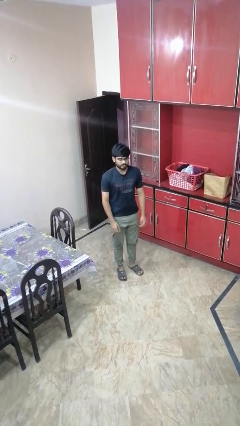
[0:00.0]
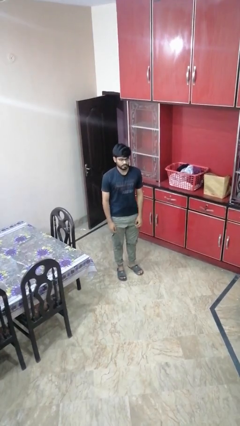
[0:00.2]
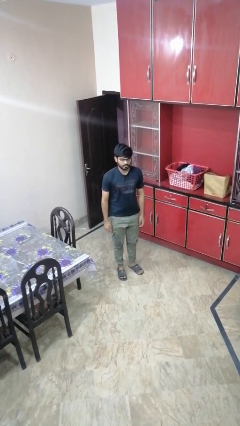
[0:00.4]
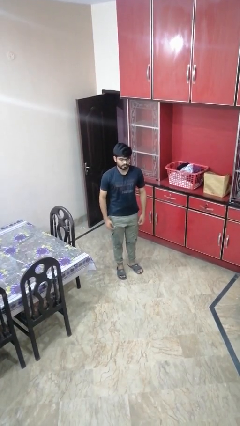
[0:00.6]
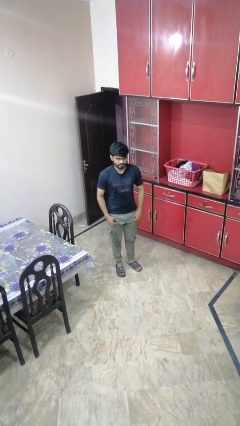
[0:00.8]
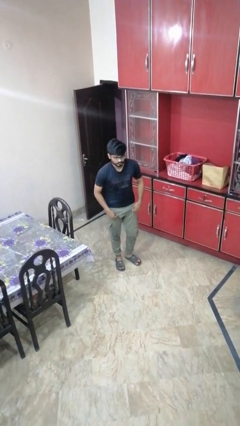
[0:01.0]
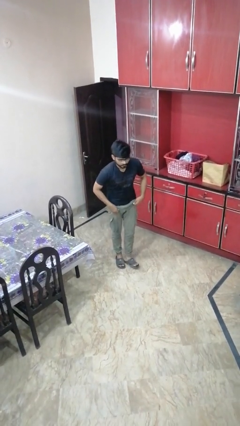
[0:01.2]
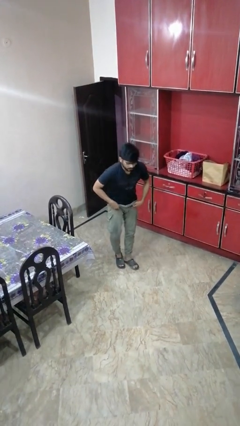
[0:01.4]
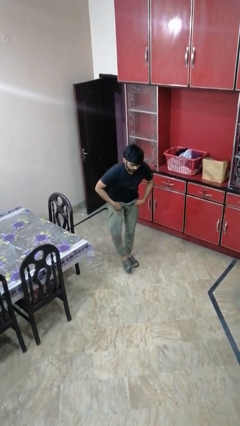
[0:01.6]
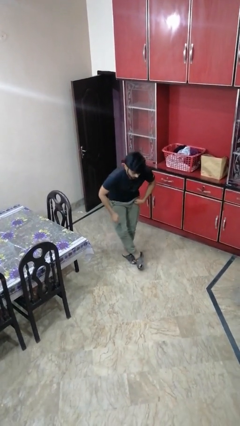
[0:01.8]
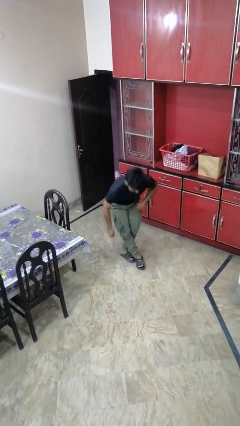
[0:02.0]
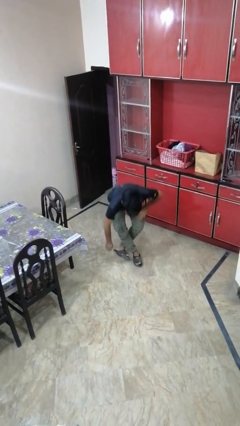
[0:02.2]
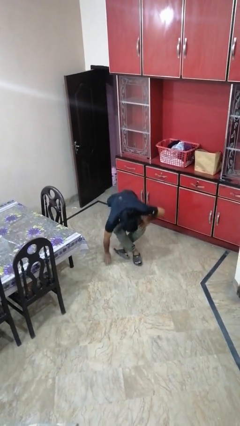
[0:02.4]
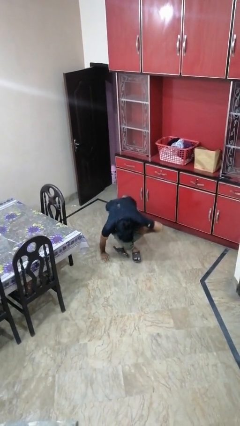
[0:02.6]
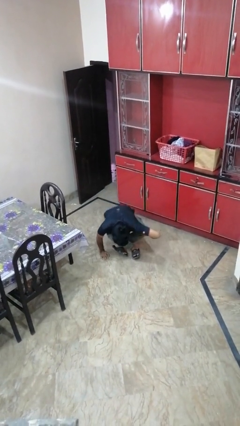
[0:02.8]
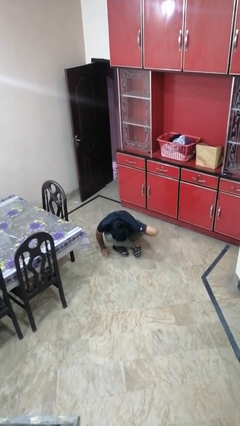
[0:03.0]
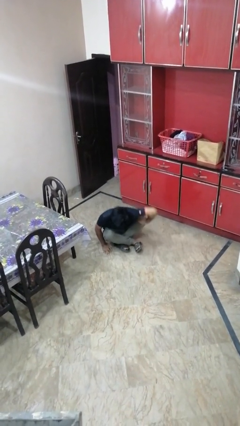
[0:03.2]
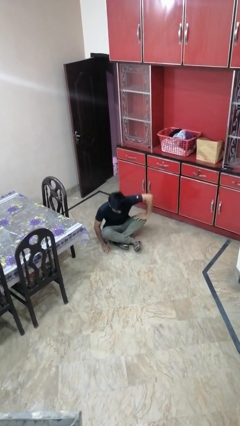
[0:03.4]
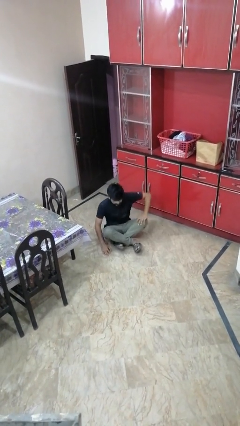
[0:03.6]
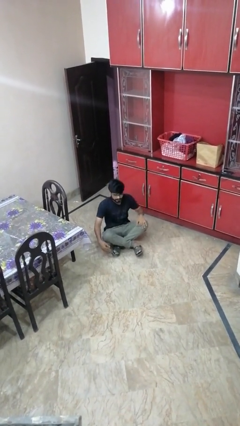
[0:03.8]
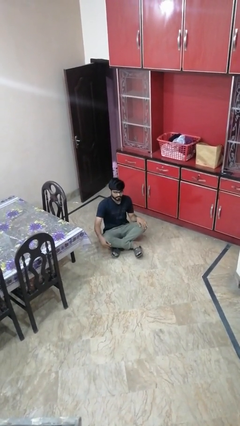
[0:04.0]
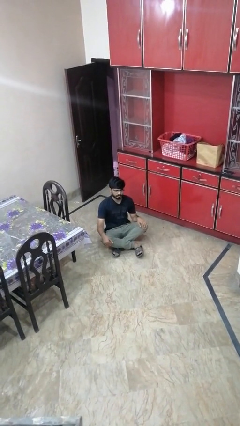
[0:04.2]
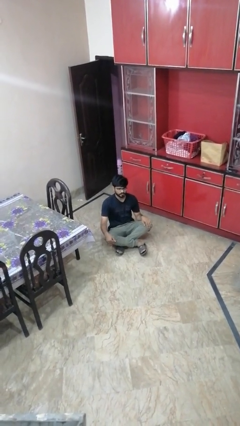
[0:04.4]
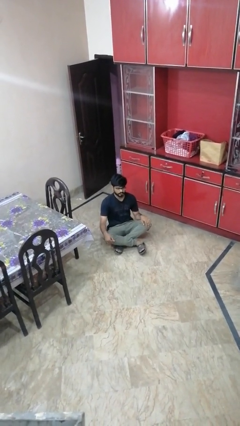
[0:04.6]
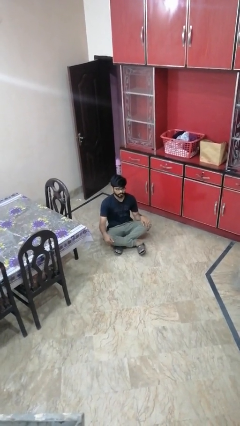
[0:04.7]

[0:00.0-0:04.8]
person sits crisscross

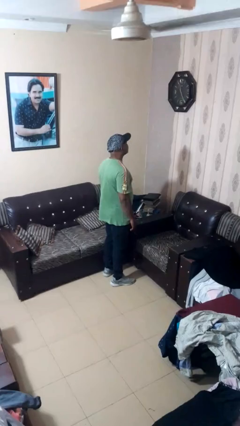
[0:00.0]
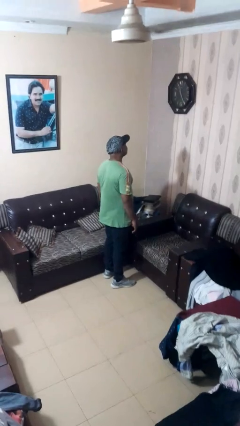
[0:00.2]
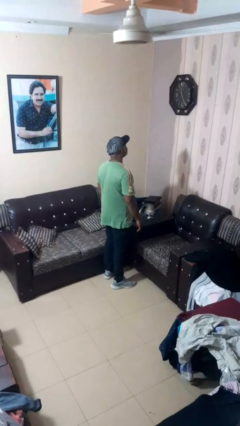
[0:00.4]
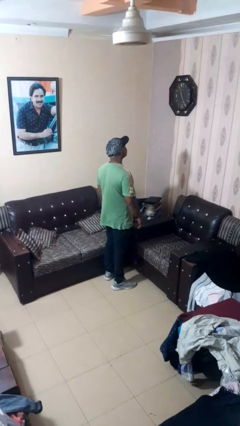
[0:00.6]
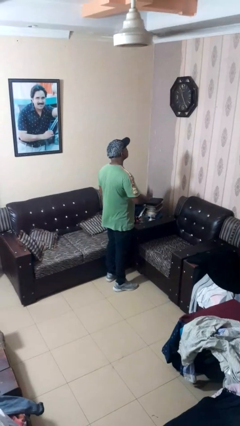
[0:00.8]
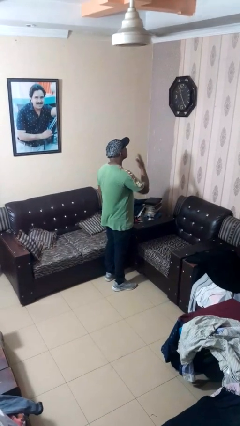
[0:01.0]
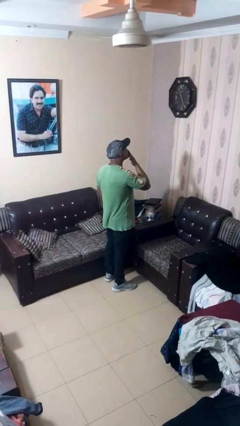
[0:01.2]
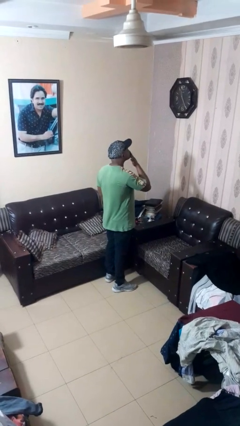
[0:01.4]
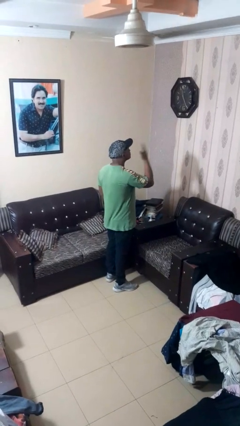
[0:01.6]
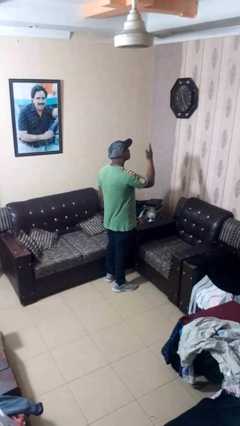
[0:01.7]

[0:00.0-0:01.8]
person gestures blow kiss

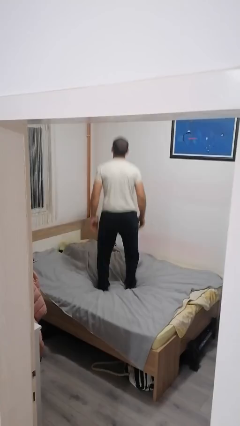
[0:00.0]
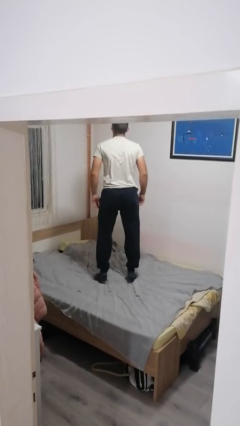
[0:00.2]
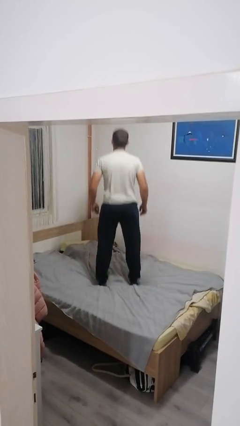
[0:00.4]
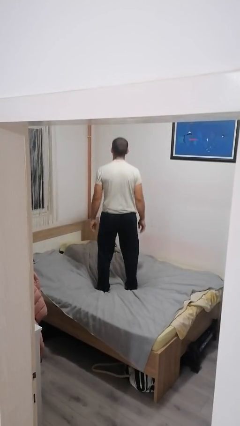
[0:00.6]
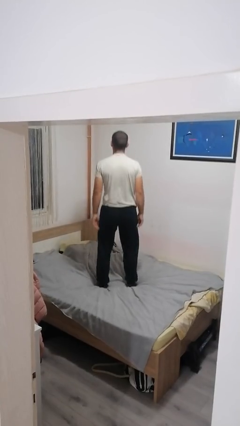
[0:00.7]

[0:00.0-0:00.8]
person jumps on bed

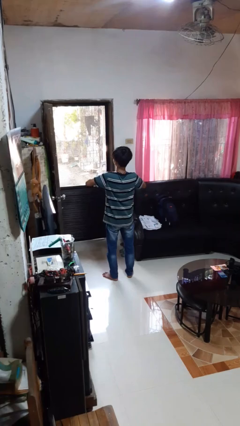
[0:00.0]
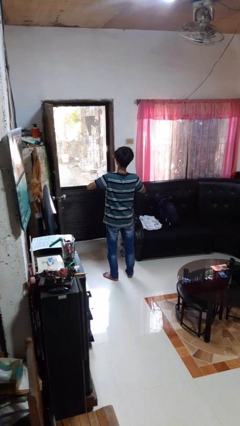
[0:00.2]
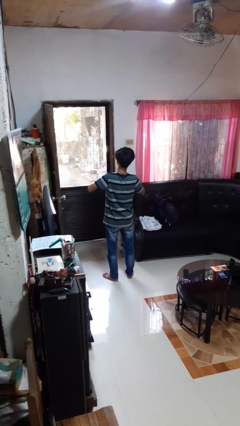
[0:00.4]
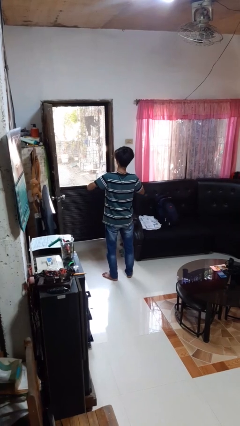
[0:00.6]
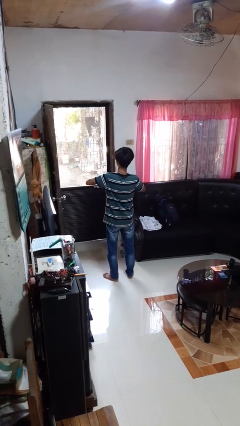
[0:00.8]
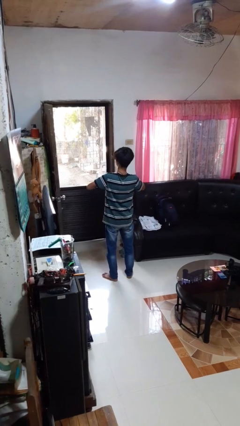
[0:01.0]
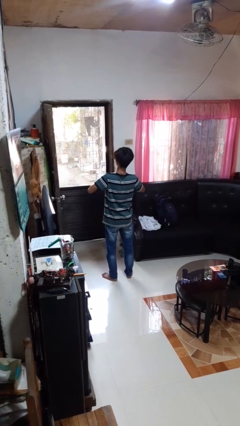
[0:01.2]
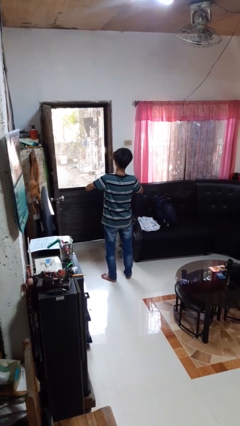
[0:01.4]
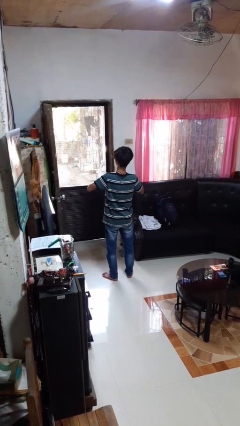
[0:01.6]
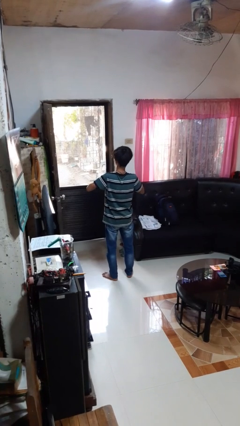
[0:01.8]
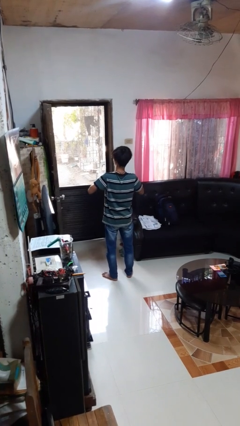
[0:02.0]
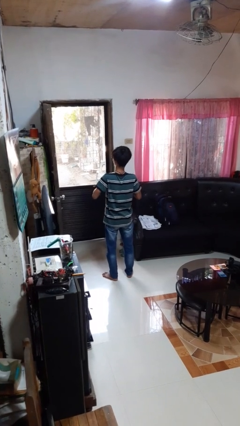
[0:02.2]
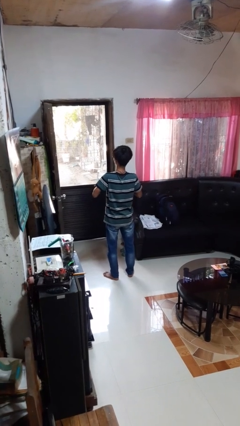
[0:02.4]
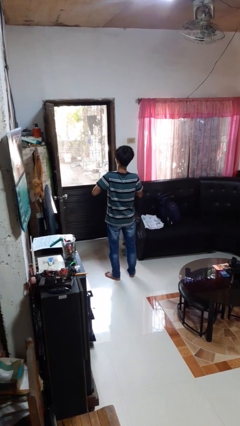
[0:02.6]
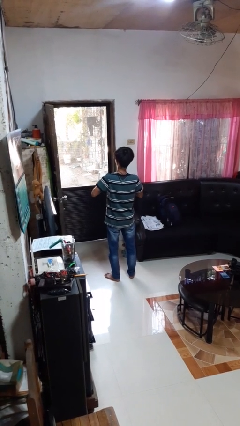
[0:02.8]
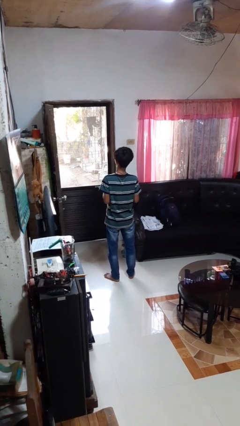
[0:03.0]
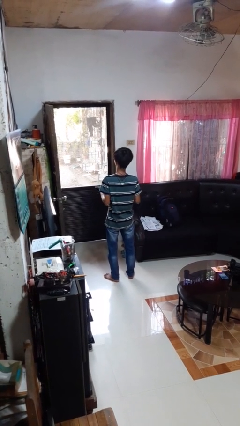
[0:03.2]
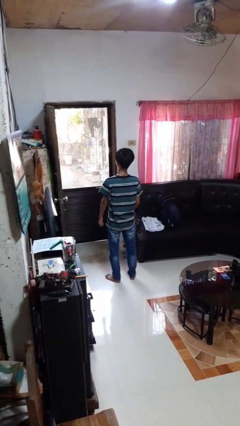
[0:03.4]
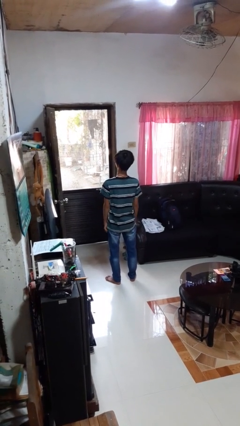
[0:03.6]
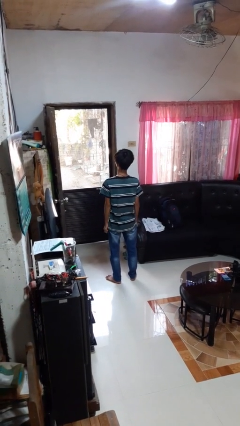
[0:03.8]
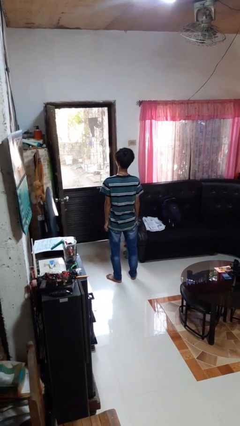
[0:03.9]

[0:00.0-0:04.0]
person unbuttons shirt

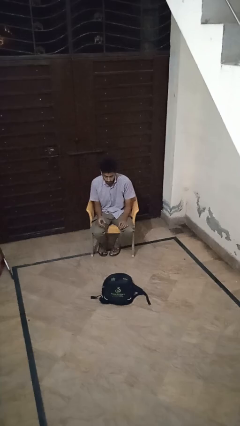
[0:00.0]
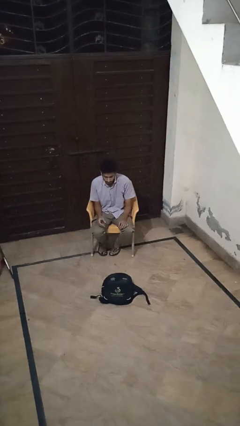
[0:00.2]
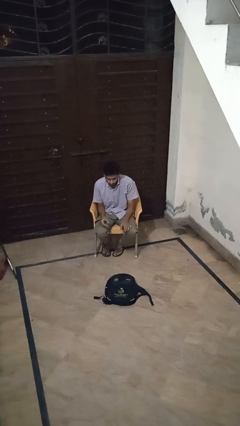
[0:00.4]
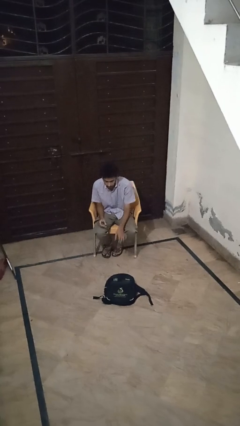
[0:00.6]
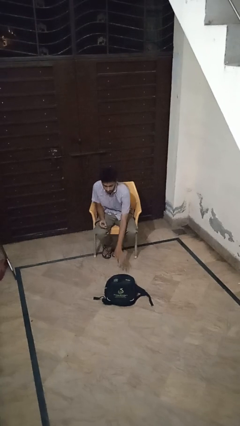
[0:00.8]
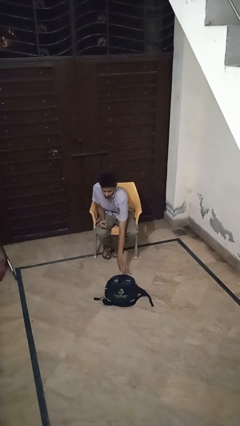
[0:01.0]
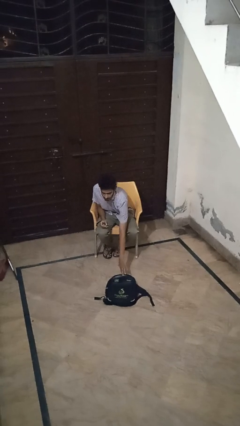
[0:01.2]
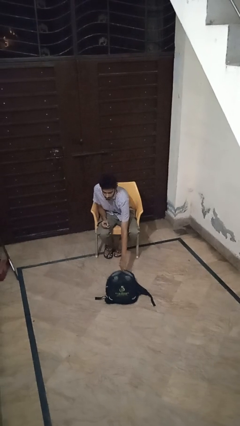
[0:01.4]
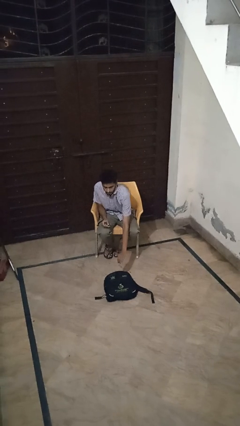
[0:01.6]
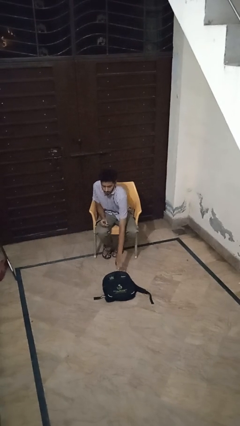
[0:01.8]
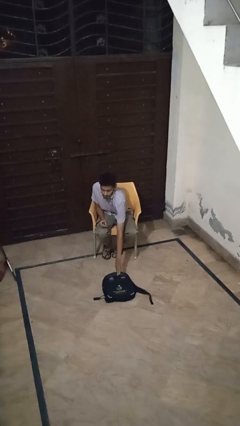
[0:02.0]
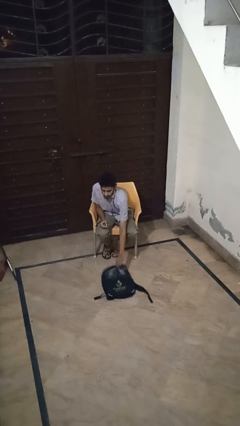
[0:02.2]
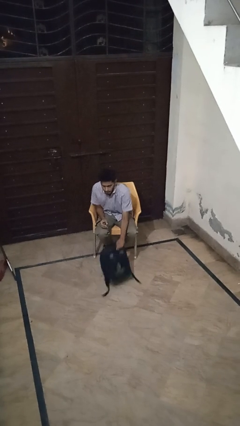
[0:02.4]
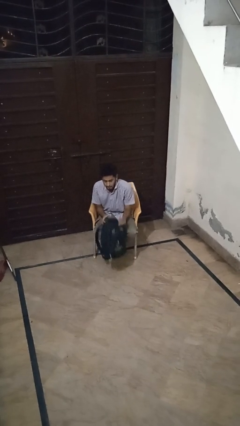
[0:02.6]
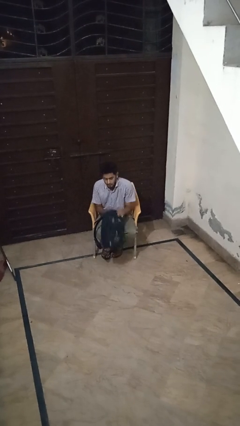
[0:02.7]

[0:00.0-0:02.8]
person picks up object from floor

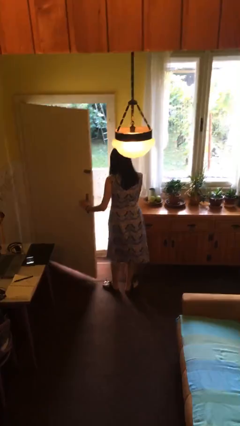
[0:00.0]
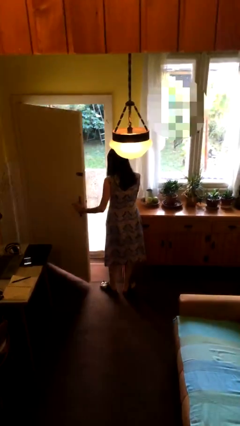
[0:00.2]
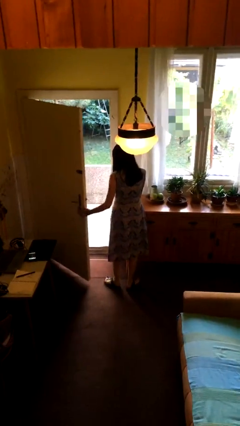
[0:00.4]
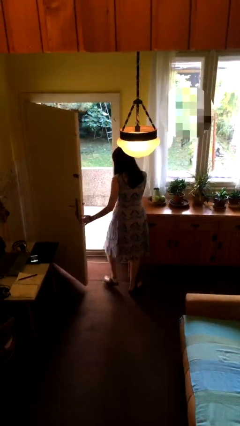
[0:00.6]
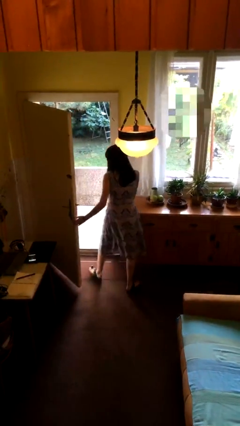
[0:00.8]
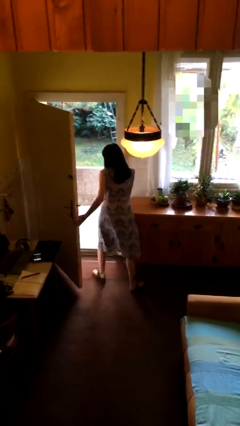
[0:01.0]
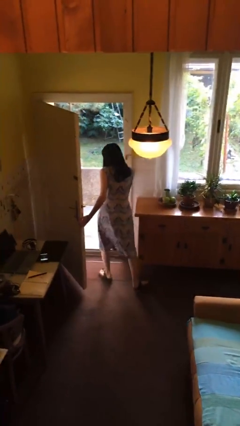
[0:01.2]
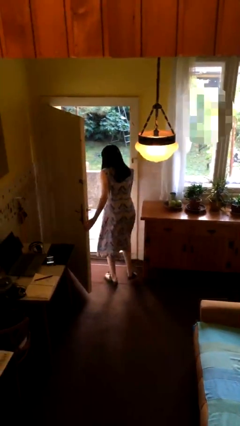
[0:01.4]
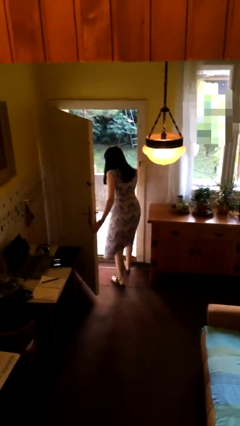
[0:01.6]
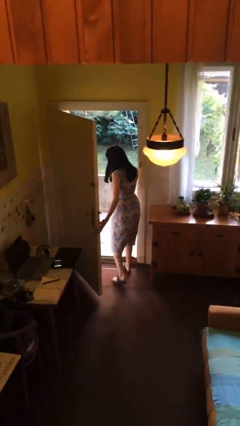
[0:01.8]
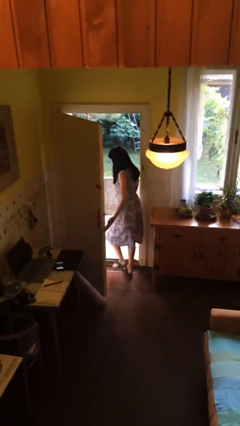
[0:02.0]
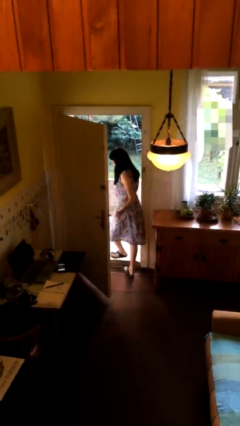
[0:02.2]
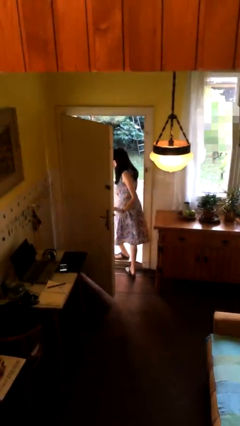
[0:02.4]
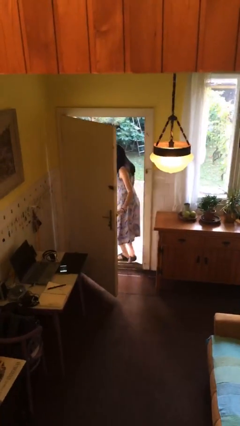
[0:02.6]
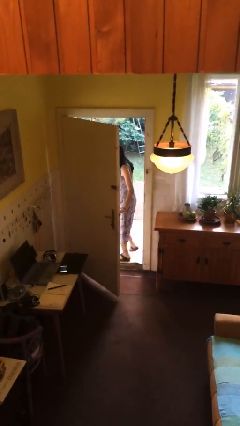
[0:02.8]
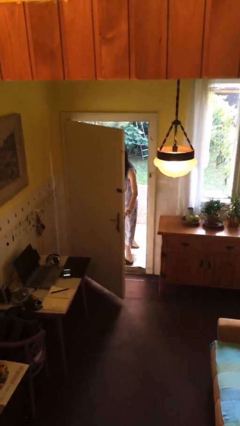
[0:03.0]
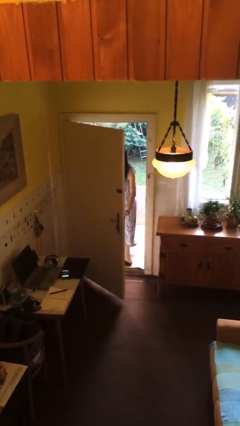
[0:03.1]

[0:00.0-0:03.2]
person exits scene through structure
